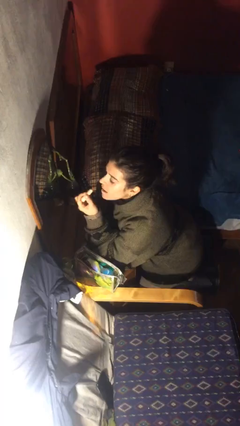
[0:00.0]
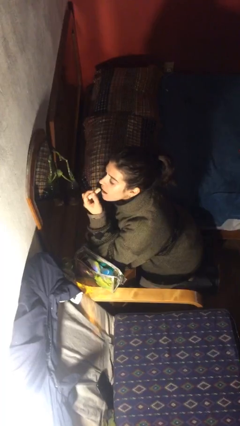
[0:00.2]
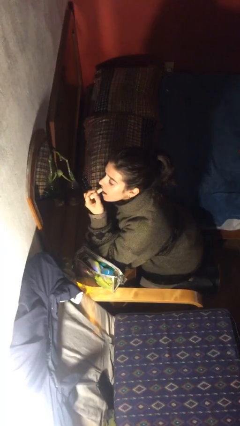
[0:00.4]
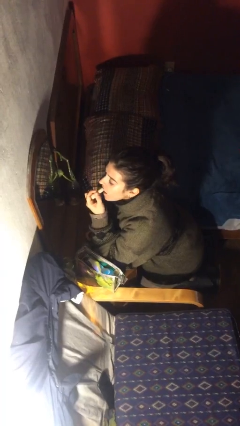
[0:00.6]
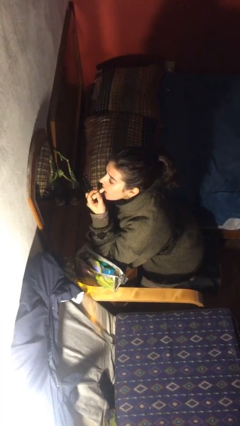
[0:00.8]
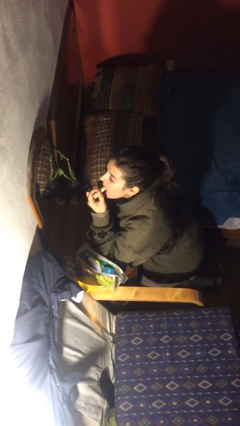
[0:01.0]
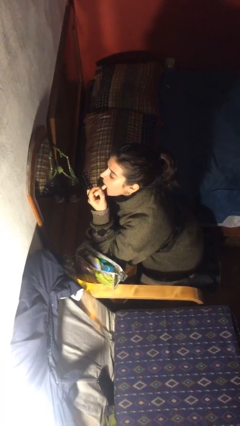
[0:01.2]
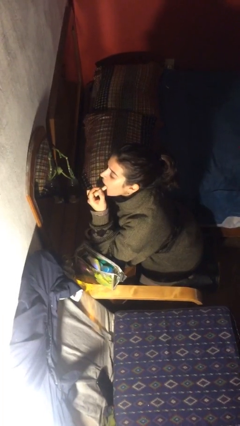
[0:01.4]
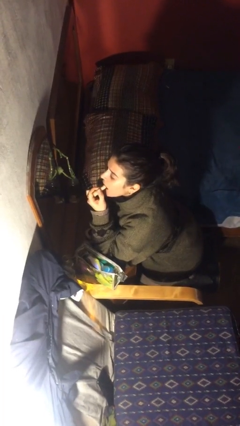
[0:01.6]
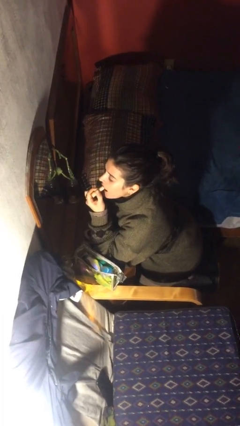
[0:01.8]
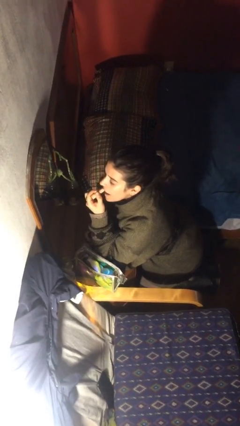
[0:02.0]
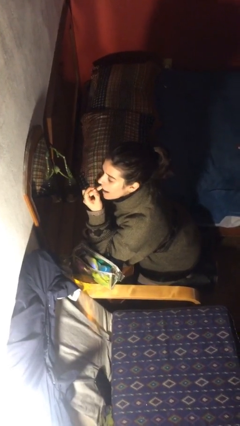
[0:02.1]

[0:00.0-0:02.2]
person applies lip makeup

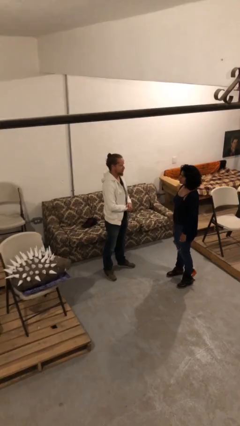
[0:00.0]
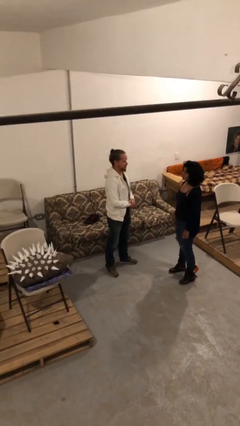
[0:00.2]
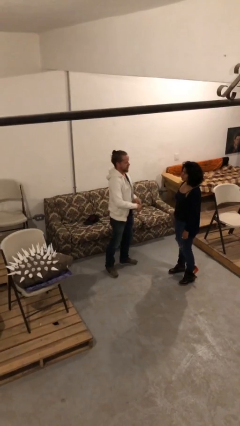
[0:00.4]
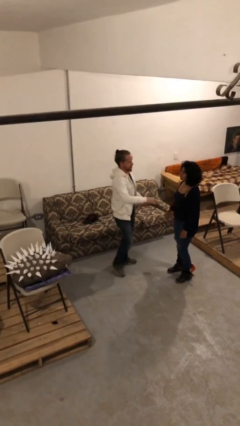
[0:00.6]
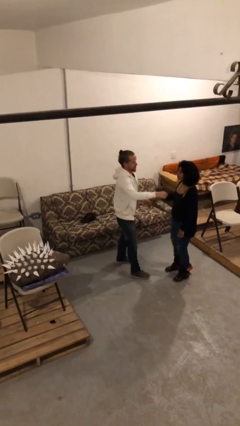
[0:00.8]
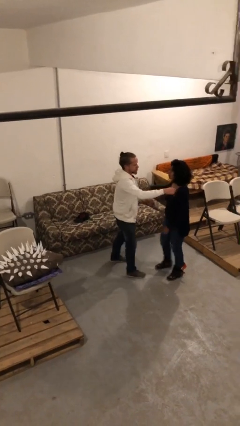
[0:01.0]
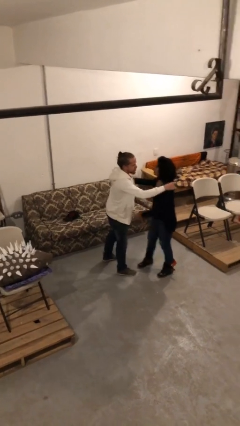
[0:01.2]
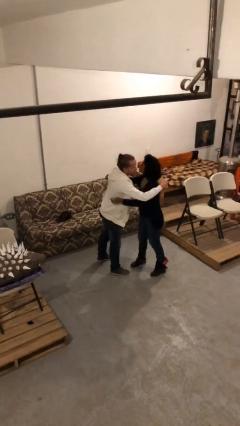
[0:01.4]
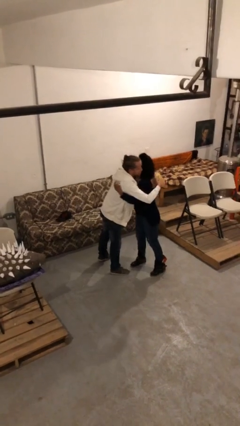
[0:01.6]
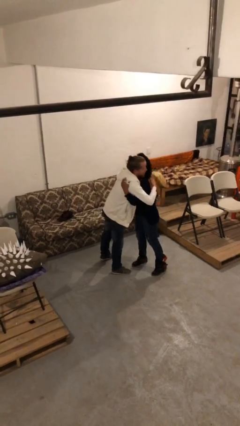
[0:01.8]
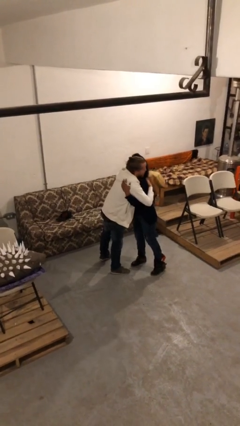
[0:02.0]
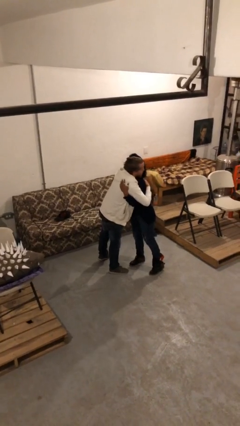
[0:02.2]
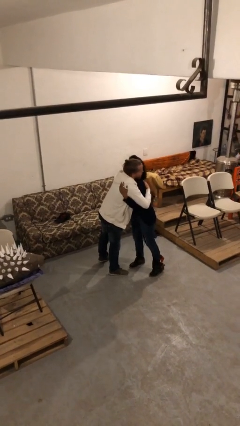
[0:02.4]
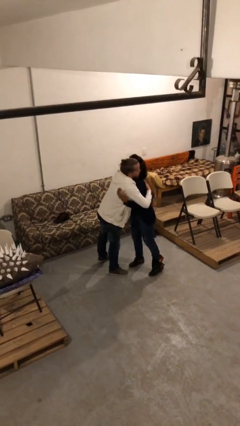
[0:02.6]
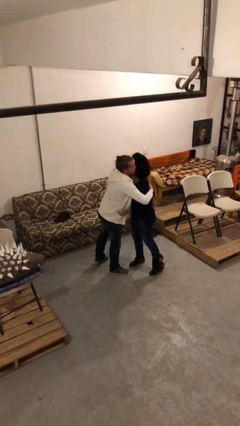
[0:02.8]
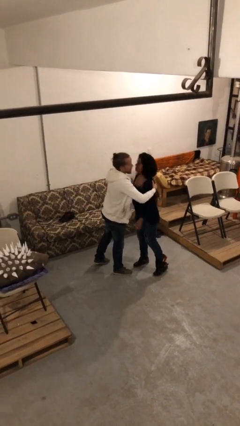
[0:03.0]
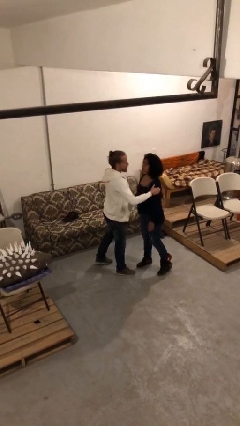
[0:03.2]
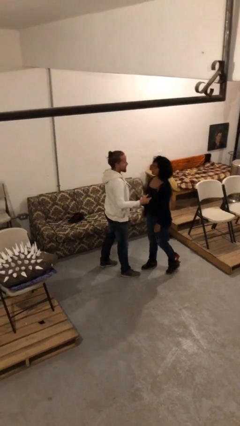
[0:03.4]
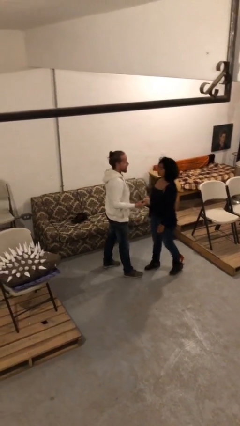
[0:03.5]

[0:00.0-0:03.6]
person embraces person

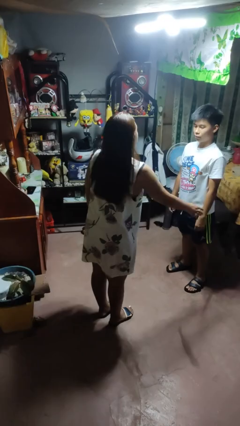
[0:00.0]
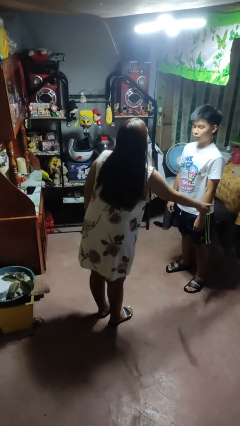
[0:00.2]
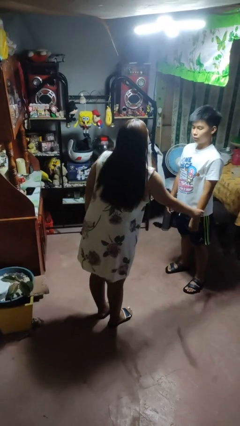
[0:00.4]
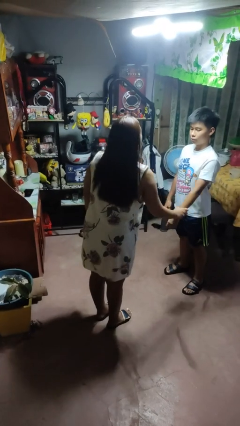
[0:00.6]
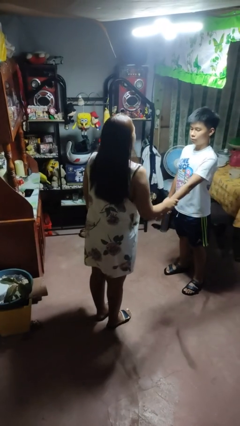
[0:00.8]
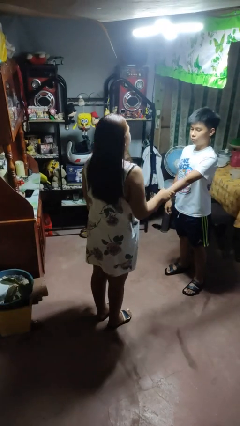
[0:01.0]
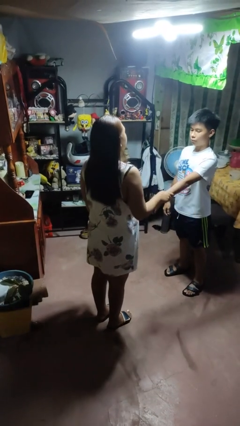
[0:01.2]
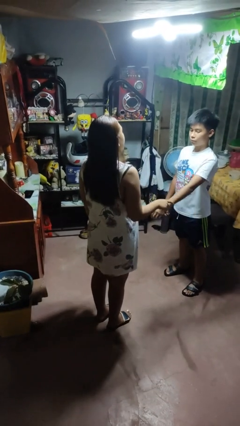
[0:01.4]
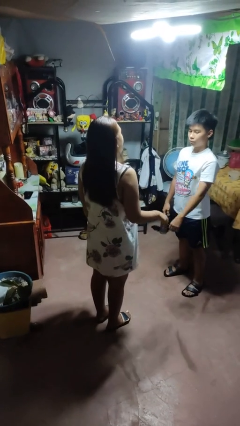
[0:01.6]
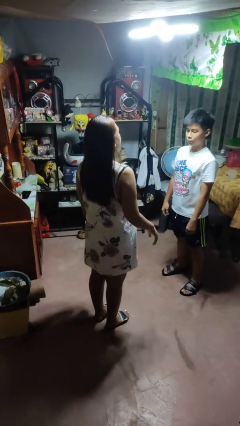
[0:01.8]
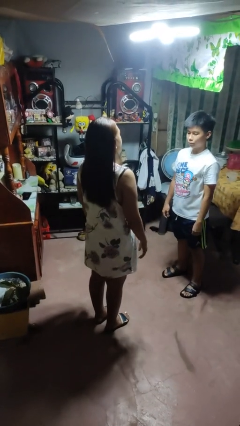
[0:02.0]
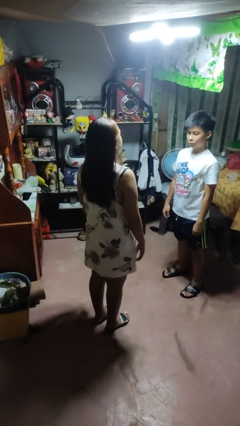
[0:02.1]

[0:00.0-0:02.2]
person grabs person by forearm

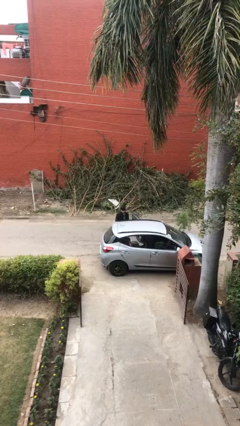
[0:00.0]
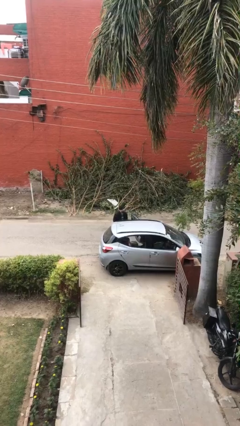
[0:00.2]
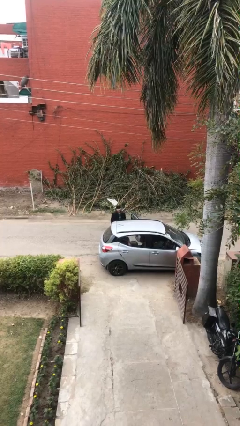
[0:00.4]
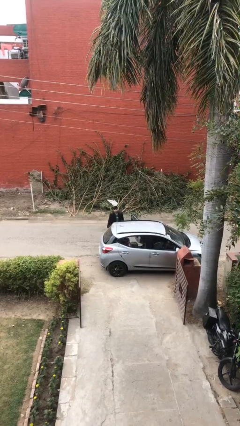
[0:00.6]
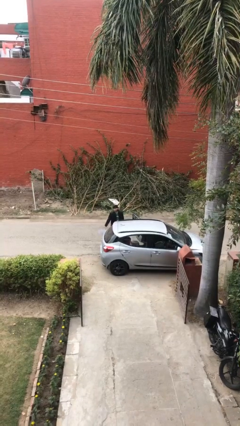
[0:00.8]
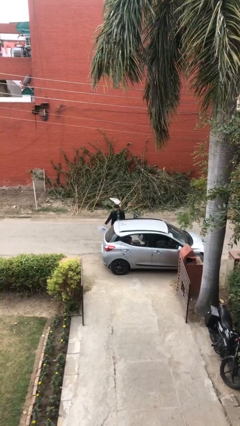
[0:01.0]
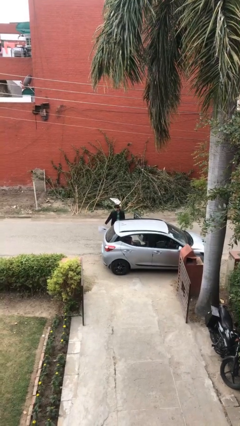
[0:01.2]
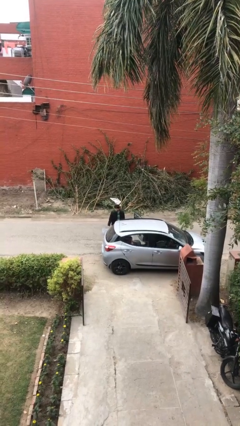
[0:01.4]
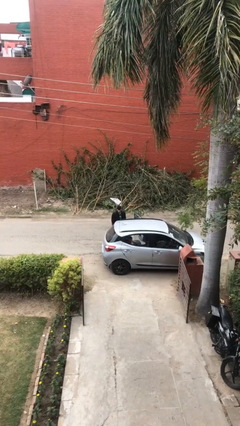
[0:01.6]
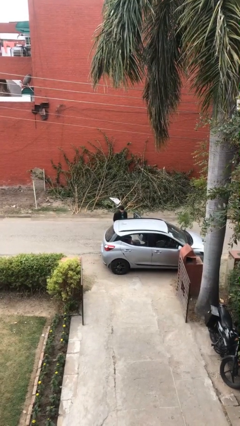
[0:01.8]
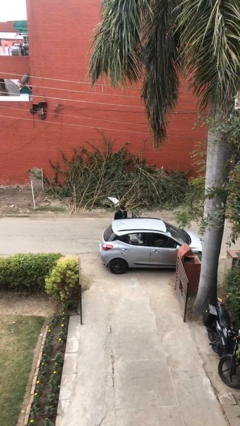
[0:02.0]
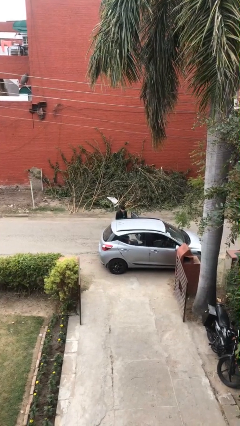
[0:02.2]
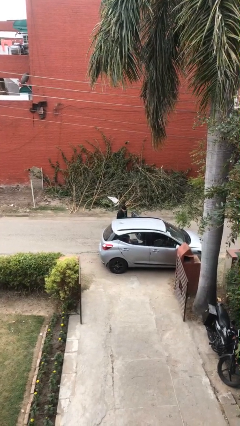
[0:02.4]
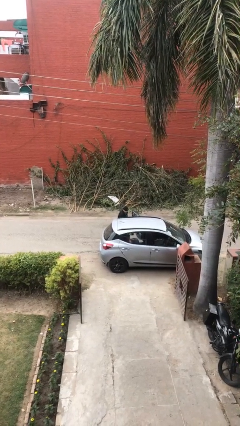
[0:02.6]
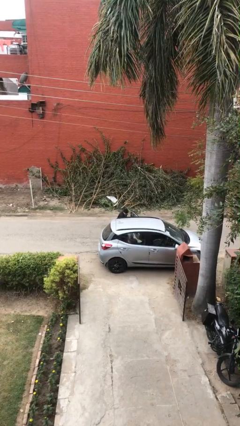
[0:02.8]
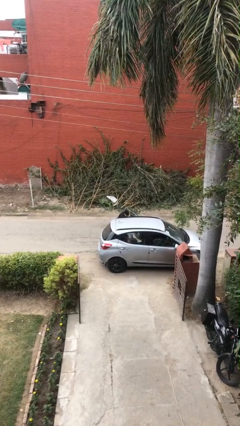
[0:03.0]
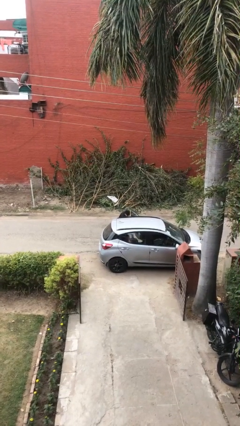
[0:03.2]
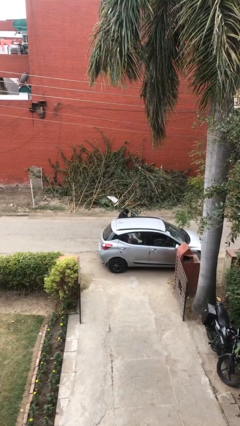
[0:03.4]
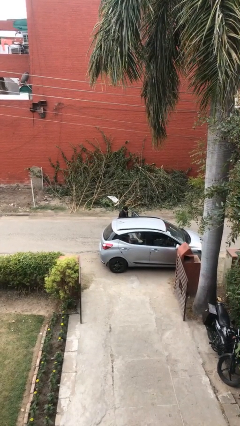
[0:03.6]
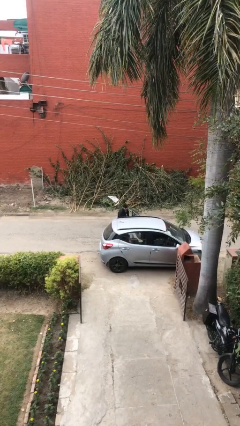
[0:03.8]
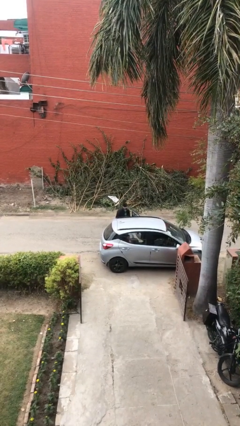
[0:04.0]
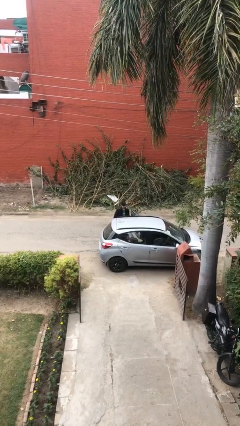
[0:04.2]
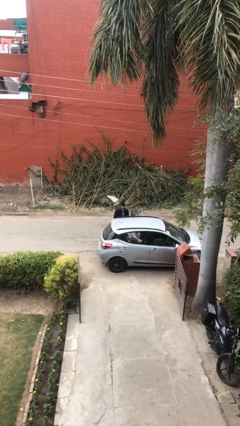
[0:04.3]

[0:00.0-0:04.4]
person loads car

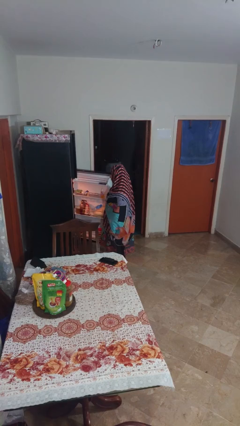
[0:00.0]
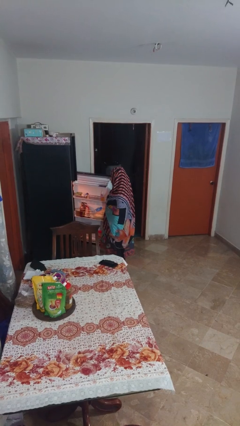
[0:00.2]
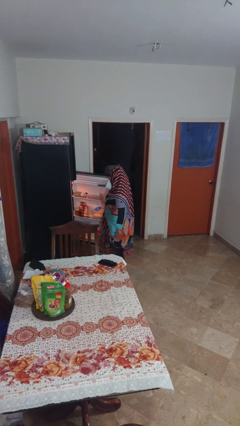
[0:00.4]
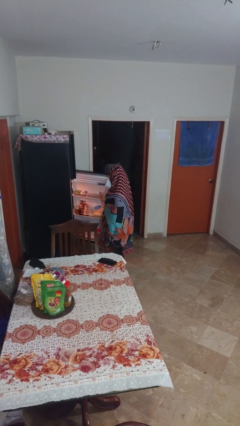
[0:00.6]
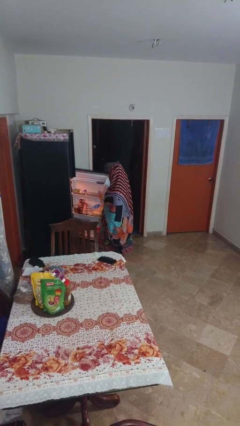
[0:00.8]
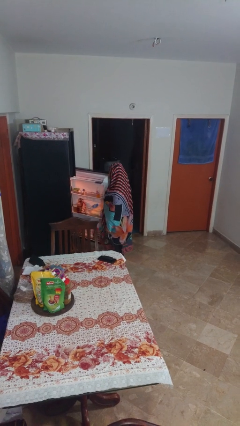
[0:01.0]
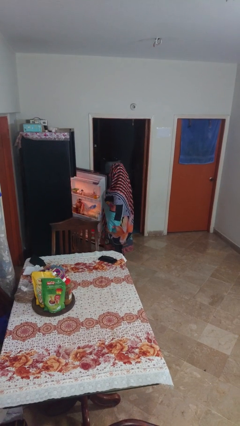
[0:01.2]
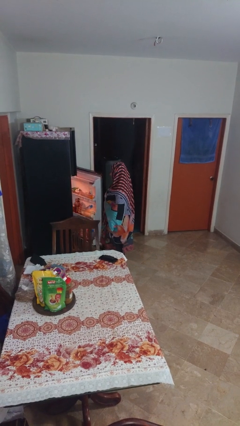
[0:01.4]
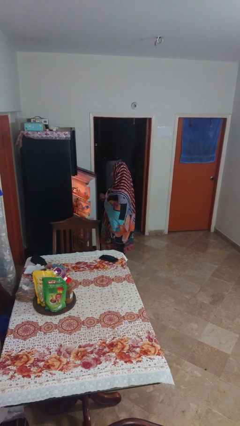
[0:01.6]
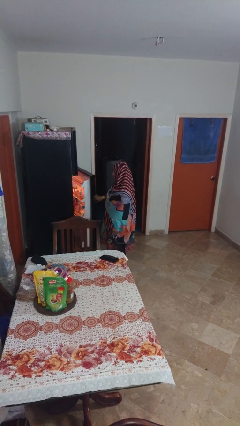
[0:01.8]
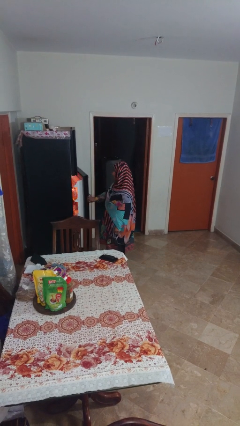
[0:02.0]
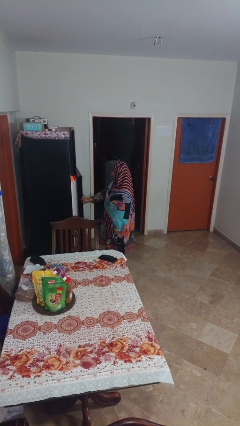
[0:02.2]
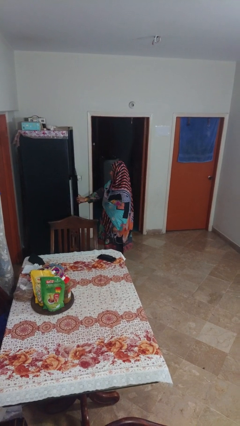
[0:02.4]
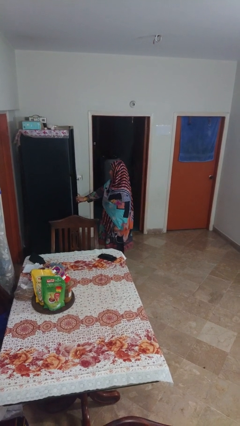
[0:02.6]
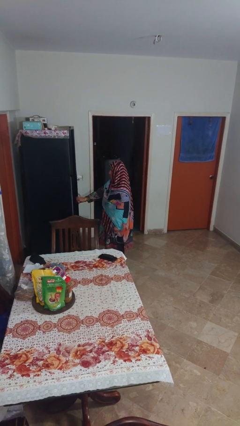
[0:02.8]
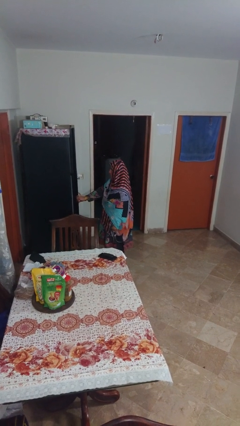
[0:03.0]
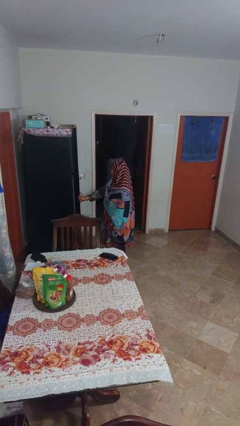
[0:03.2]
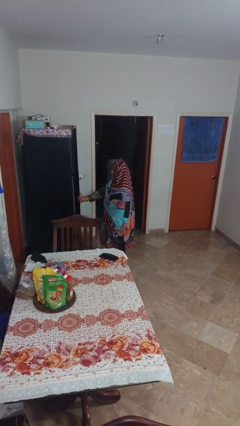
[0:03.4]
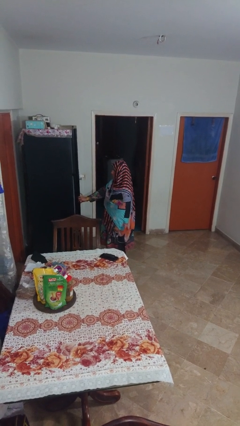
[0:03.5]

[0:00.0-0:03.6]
person closes refrigerator

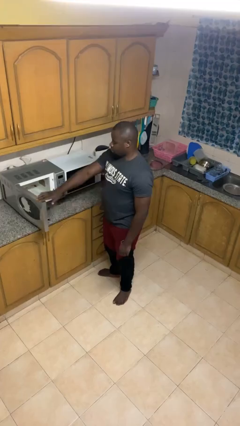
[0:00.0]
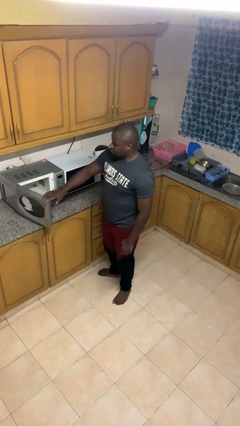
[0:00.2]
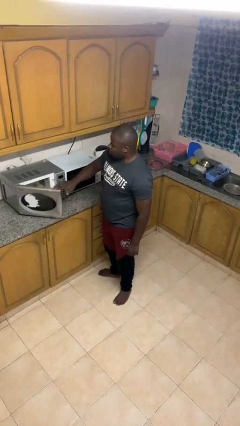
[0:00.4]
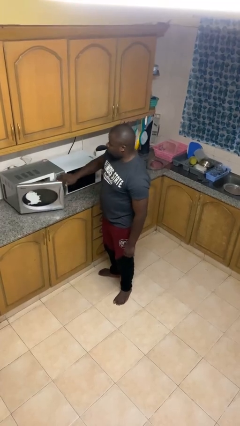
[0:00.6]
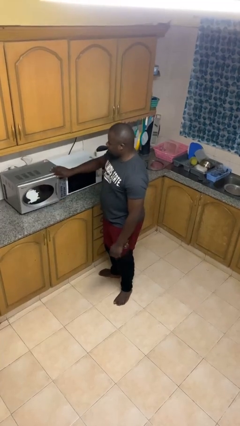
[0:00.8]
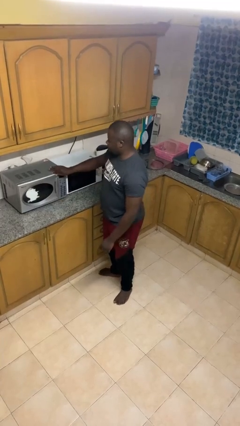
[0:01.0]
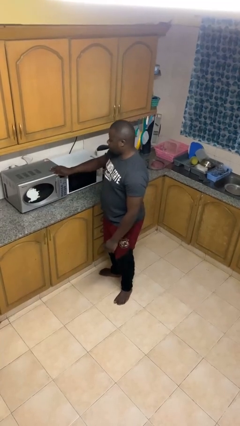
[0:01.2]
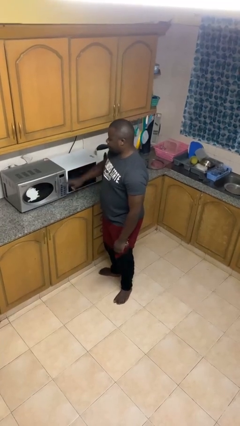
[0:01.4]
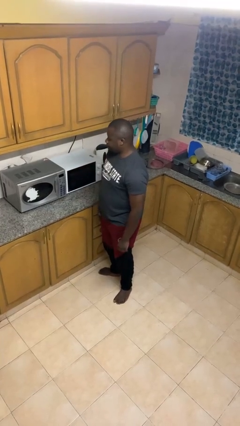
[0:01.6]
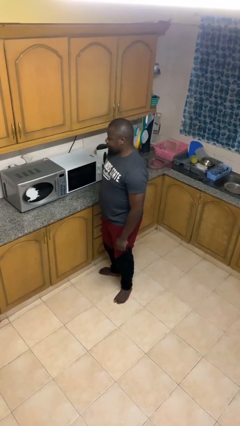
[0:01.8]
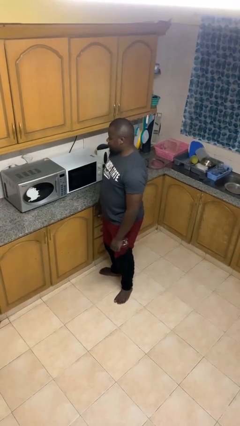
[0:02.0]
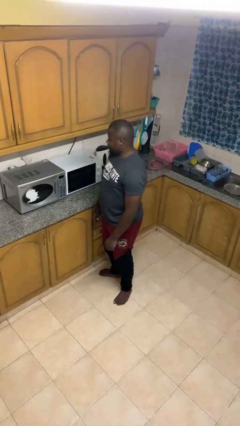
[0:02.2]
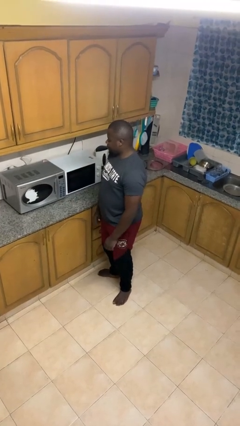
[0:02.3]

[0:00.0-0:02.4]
person closes microwave
